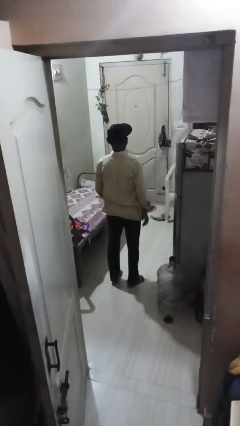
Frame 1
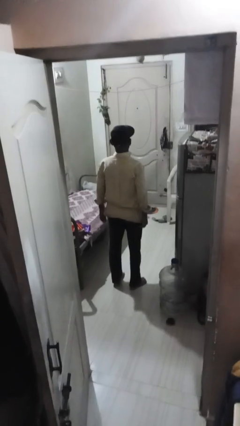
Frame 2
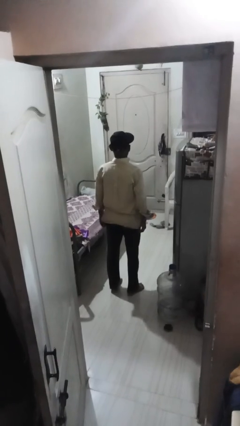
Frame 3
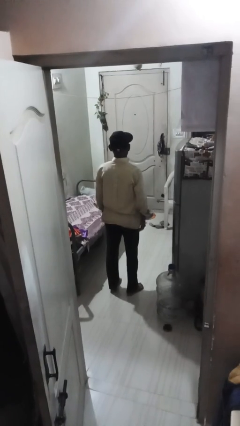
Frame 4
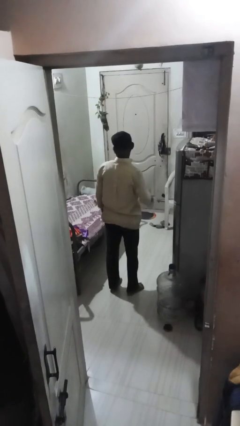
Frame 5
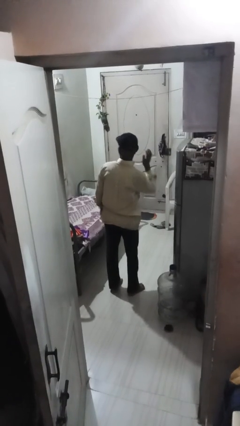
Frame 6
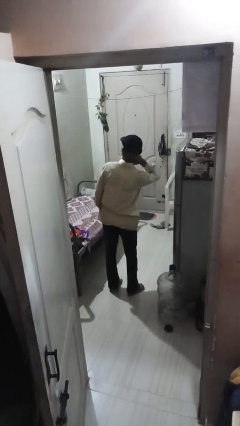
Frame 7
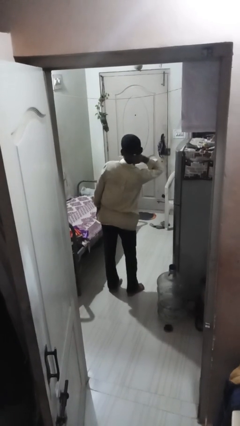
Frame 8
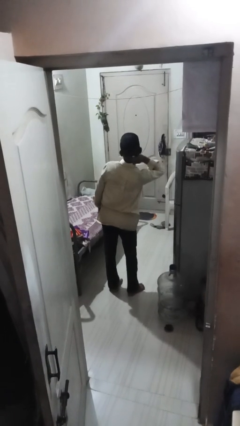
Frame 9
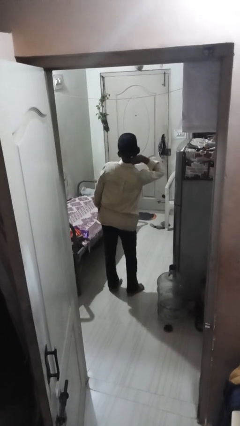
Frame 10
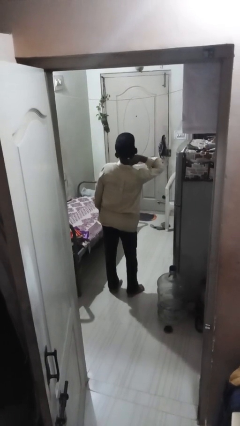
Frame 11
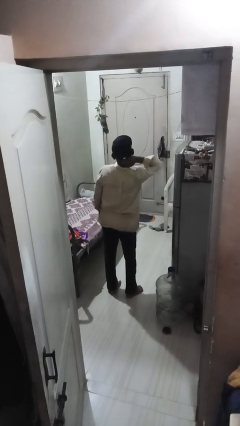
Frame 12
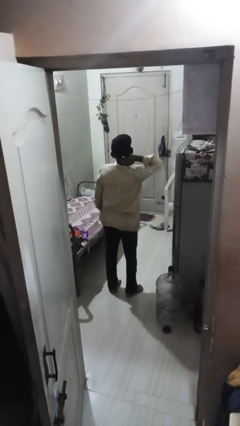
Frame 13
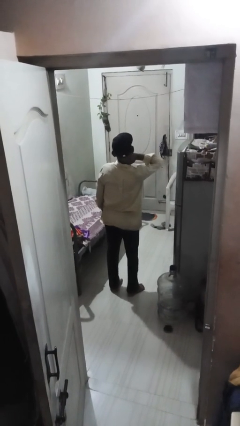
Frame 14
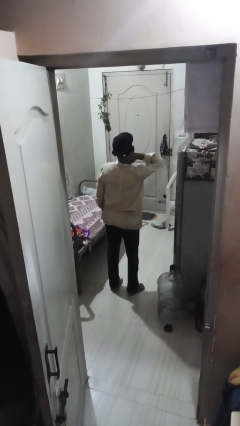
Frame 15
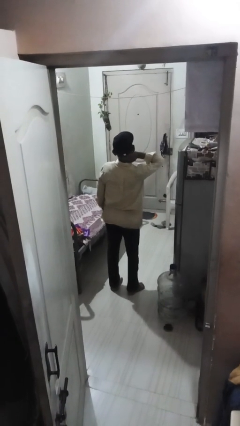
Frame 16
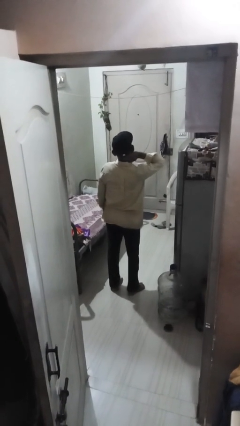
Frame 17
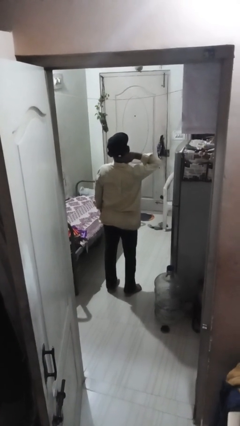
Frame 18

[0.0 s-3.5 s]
person rubs neck

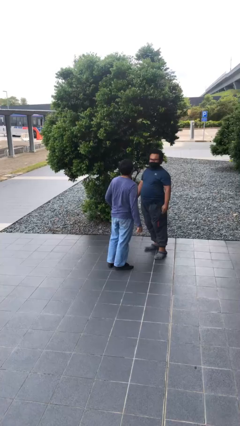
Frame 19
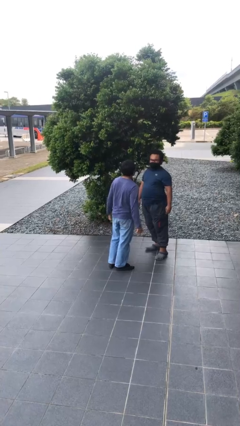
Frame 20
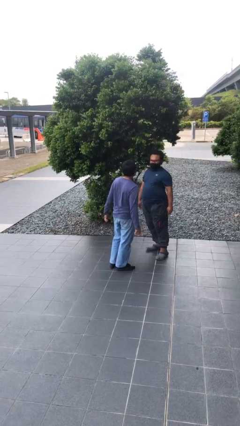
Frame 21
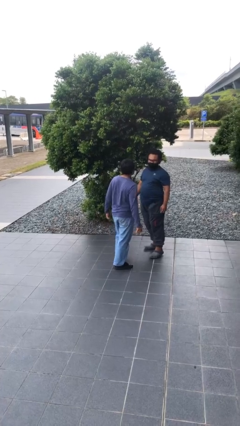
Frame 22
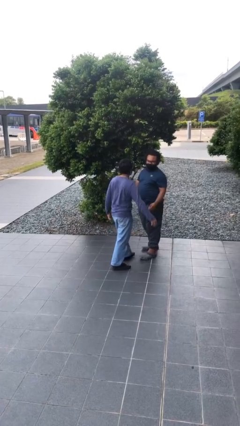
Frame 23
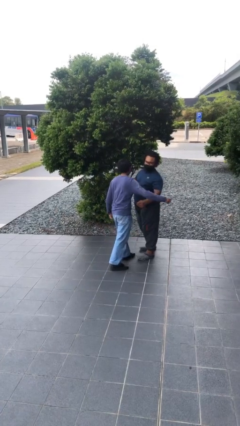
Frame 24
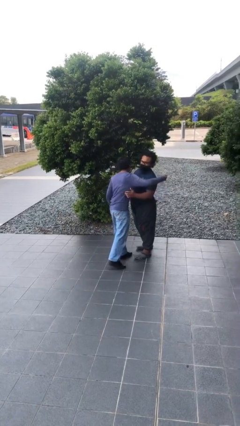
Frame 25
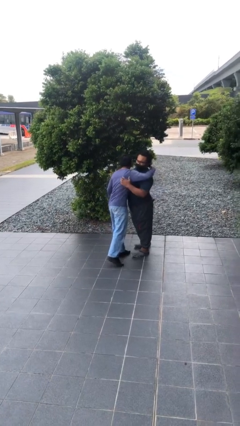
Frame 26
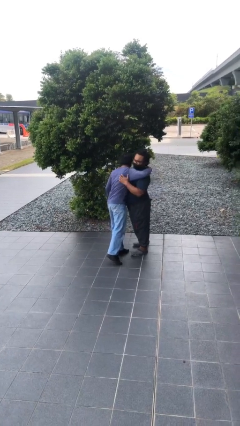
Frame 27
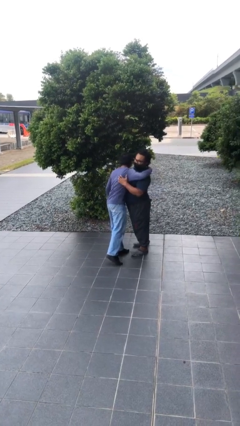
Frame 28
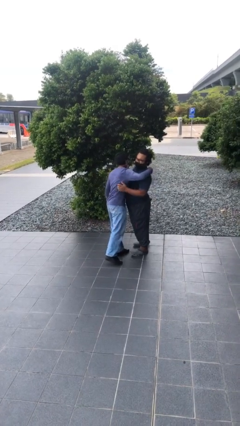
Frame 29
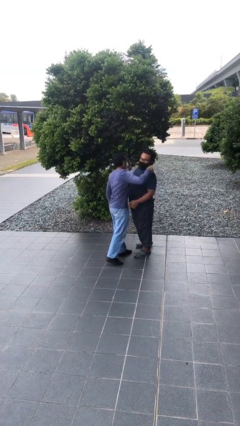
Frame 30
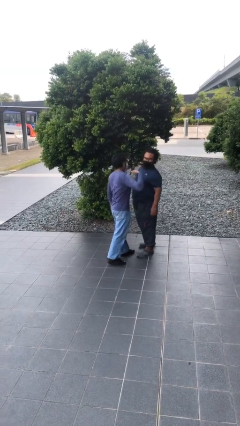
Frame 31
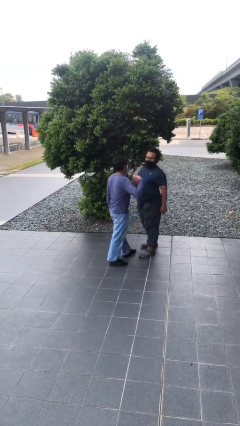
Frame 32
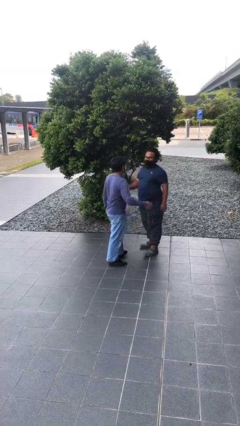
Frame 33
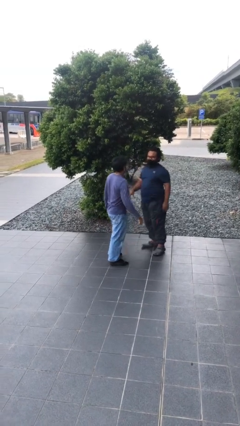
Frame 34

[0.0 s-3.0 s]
person embraces person

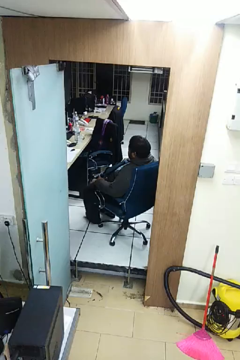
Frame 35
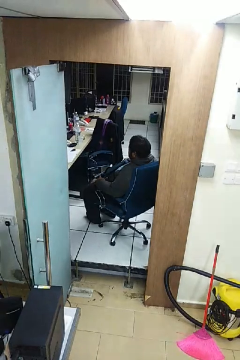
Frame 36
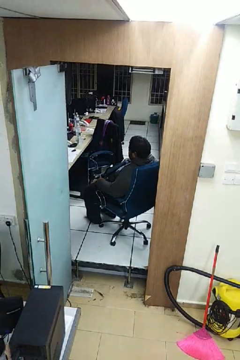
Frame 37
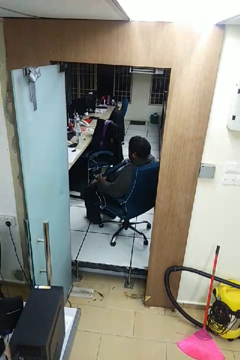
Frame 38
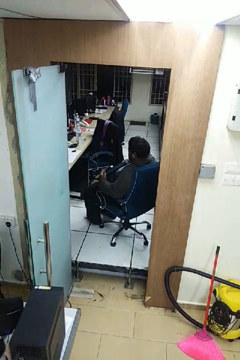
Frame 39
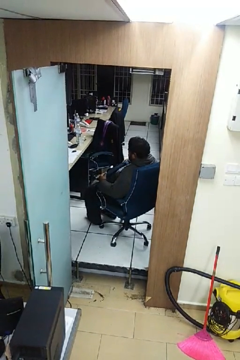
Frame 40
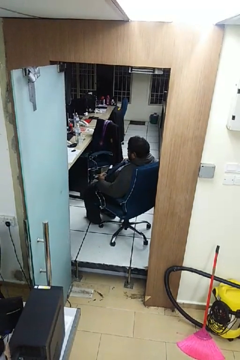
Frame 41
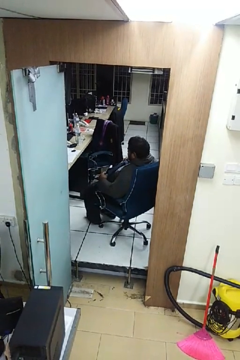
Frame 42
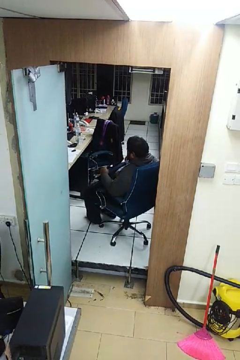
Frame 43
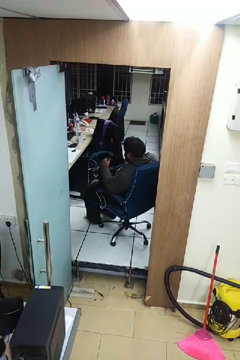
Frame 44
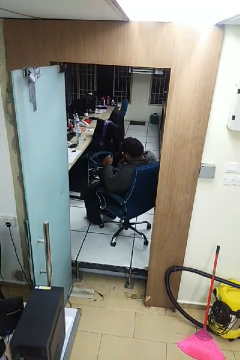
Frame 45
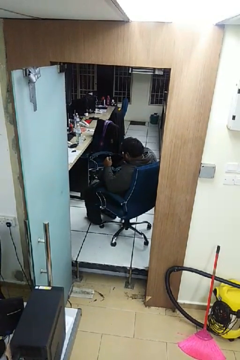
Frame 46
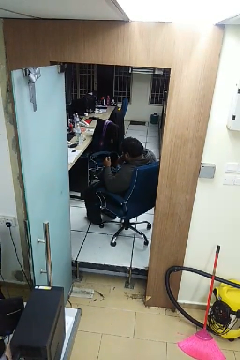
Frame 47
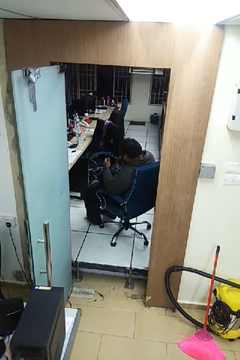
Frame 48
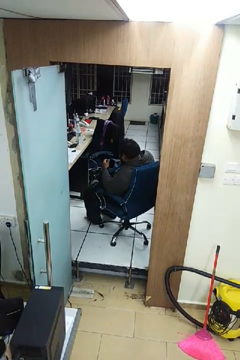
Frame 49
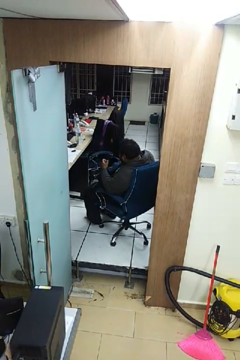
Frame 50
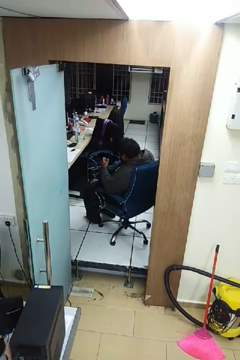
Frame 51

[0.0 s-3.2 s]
person searches in backpack

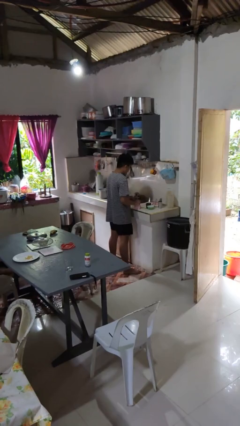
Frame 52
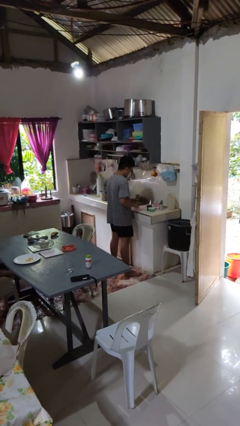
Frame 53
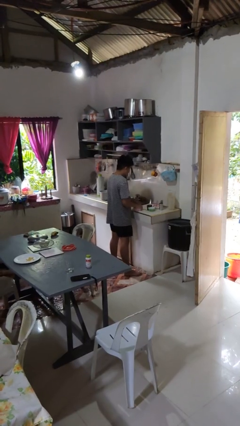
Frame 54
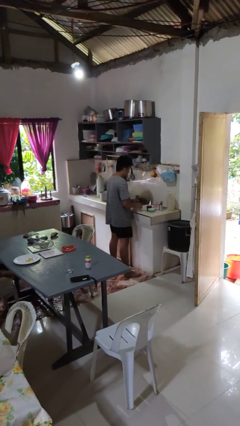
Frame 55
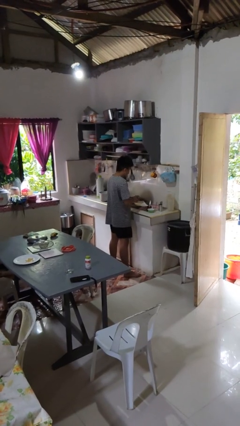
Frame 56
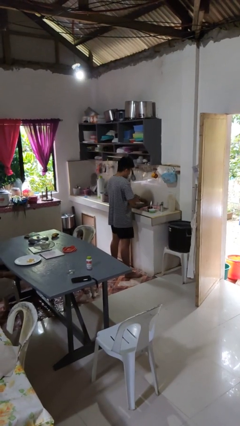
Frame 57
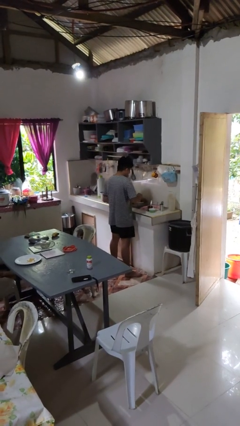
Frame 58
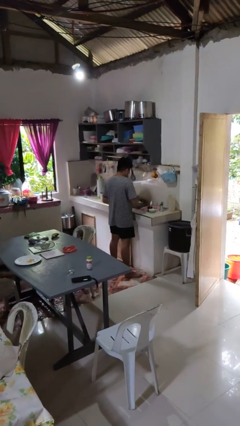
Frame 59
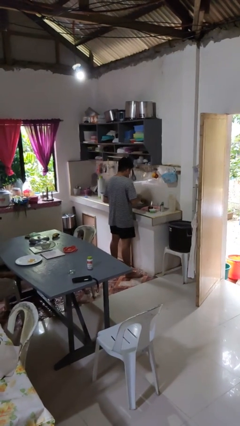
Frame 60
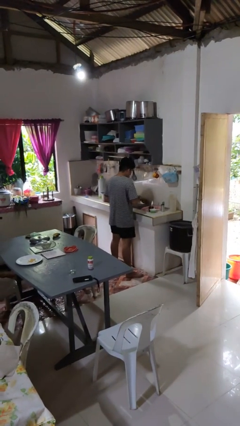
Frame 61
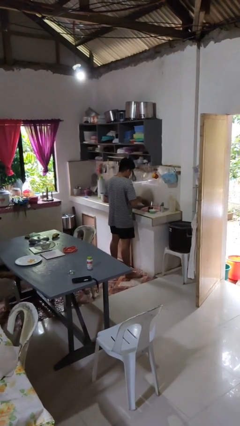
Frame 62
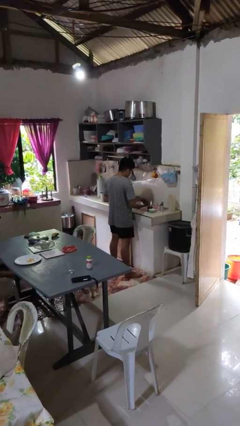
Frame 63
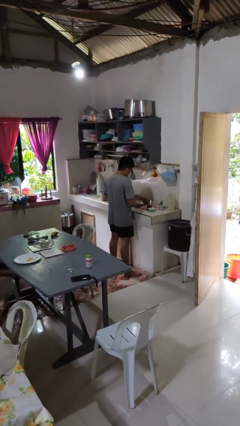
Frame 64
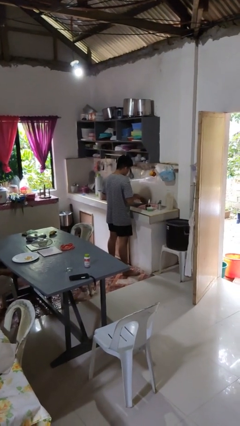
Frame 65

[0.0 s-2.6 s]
person washes dish

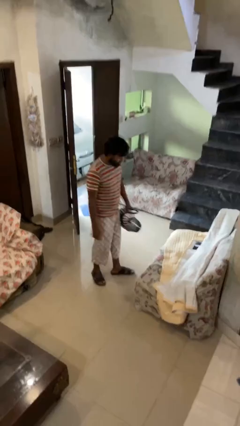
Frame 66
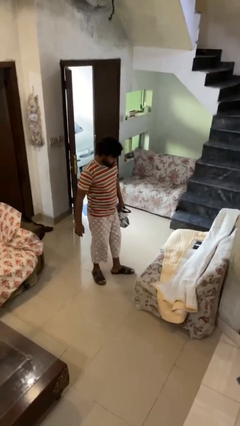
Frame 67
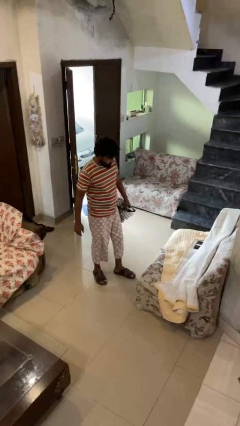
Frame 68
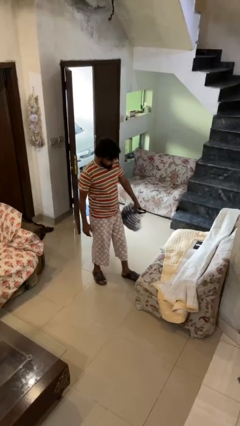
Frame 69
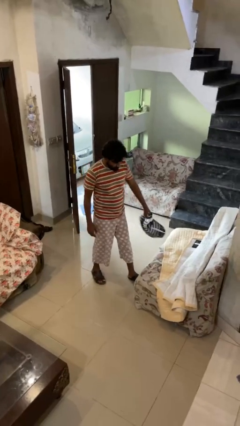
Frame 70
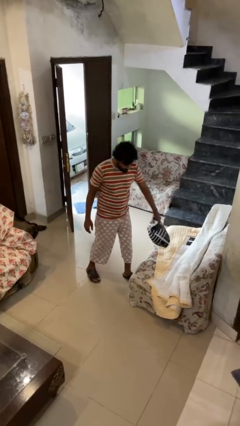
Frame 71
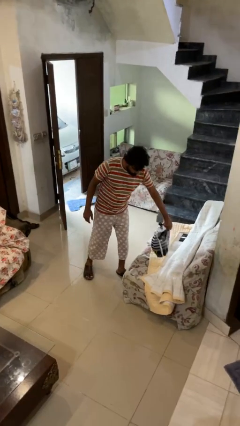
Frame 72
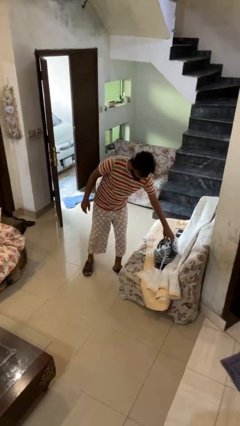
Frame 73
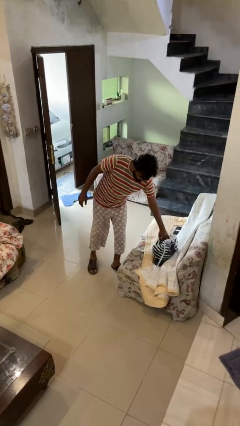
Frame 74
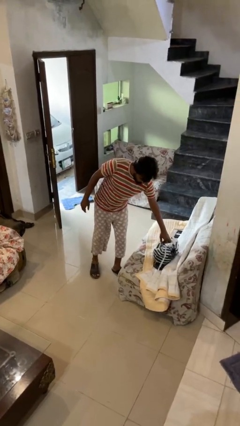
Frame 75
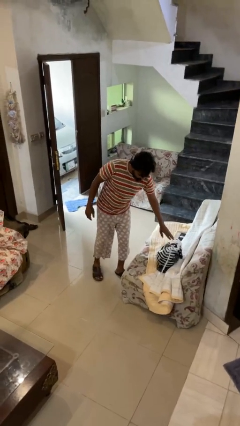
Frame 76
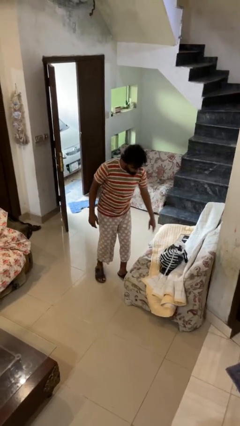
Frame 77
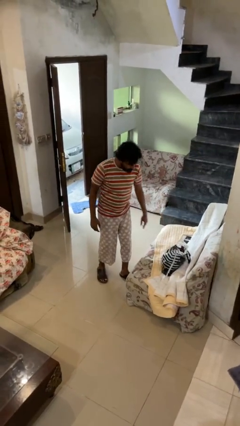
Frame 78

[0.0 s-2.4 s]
person puts down object on couch

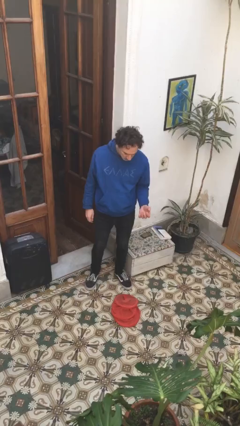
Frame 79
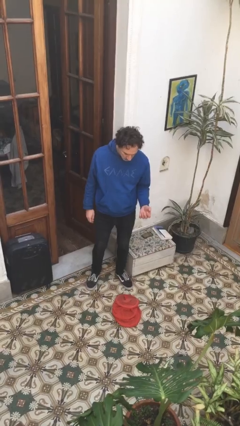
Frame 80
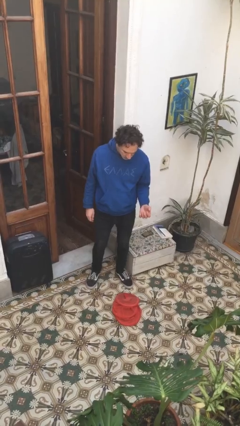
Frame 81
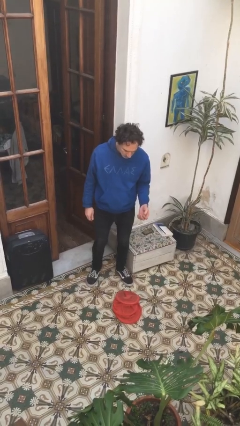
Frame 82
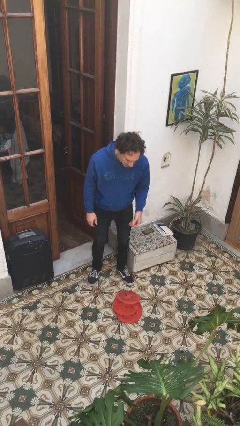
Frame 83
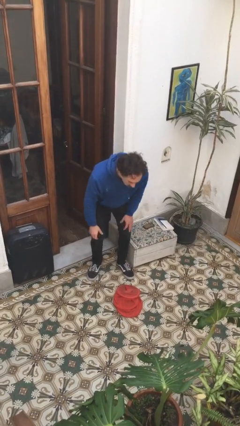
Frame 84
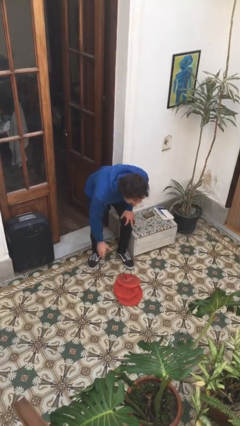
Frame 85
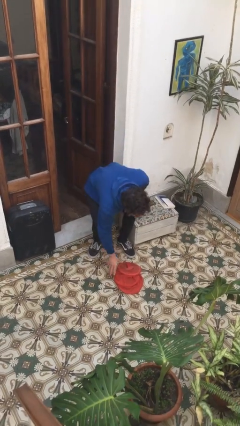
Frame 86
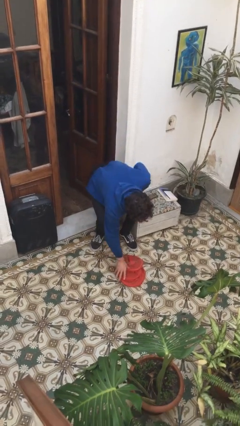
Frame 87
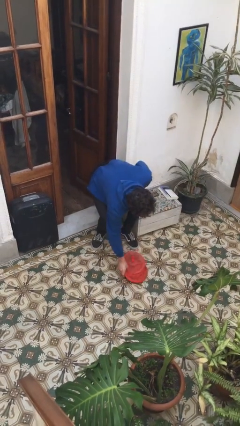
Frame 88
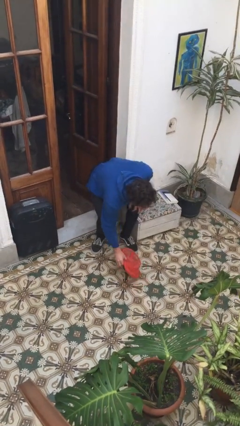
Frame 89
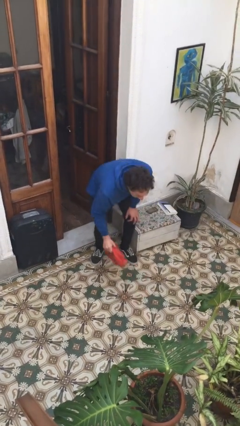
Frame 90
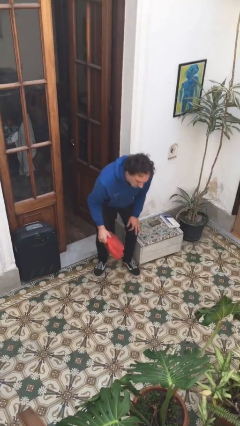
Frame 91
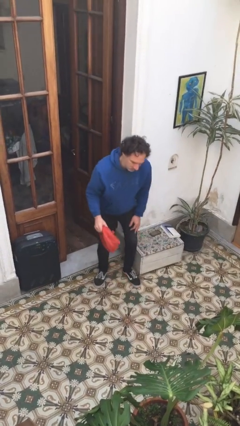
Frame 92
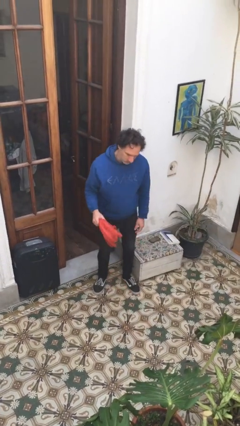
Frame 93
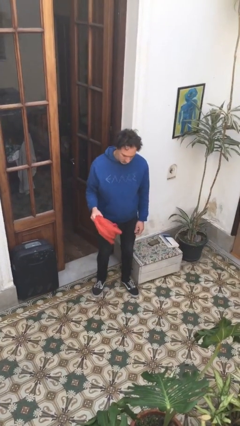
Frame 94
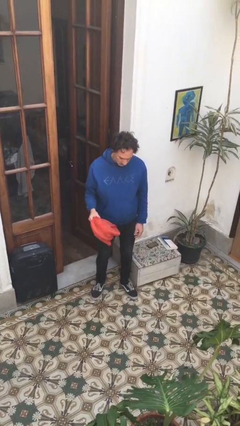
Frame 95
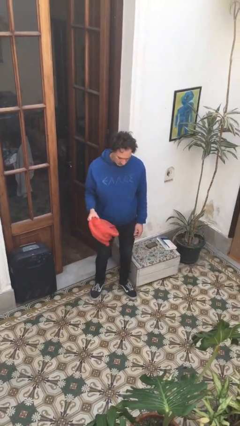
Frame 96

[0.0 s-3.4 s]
person picks up object from floor
